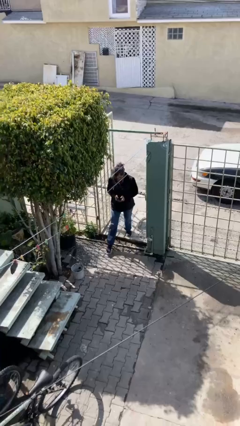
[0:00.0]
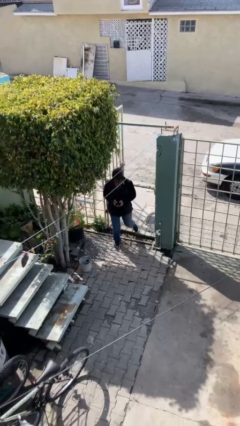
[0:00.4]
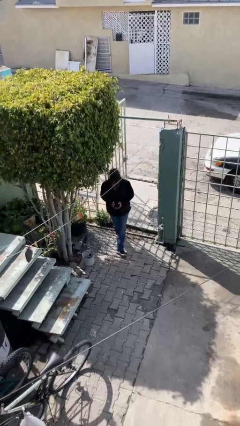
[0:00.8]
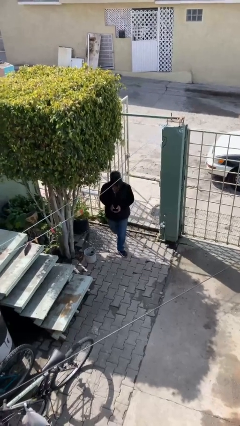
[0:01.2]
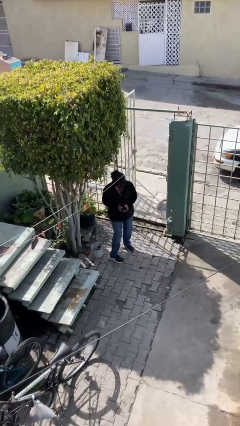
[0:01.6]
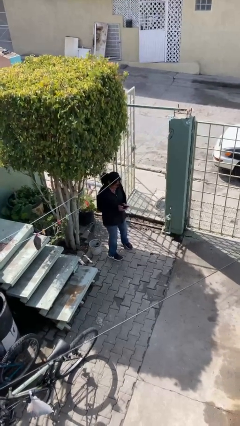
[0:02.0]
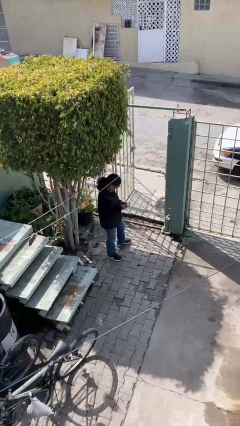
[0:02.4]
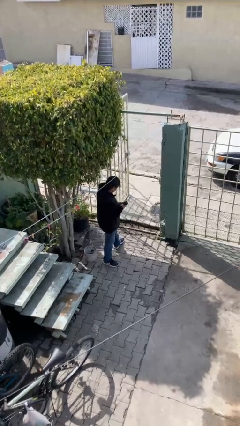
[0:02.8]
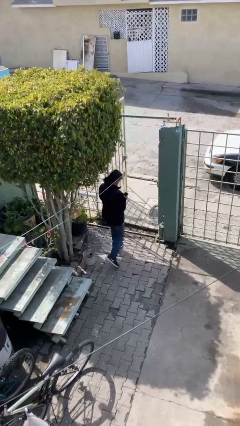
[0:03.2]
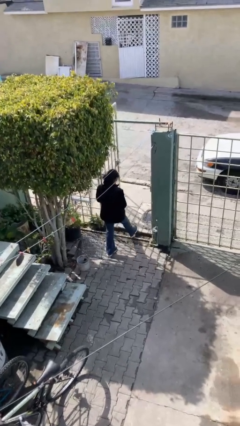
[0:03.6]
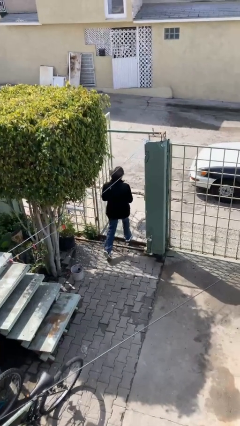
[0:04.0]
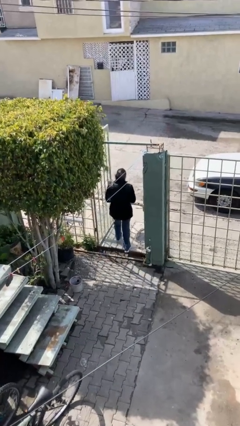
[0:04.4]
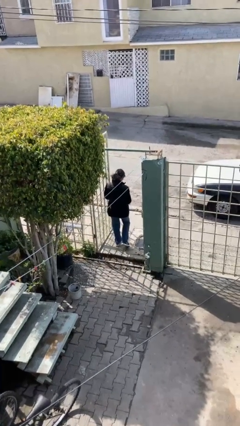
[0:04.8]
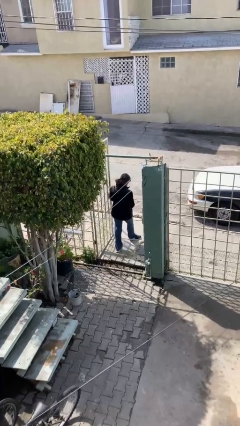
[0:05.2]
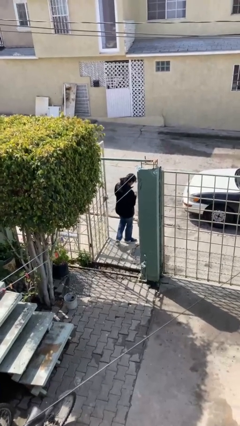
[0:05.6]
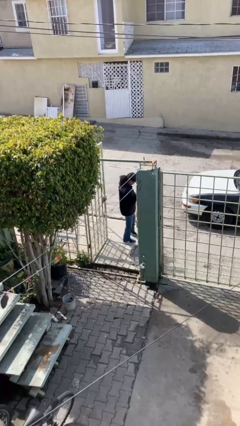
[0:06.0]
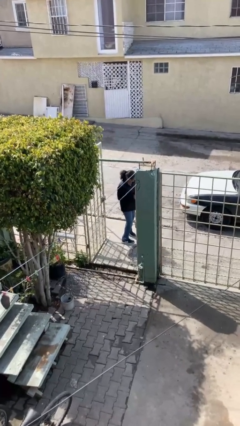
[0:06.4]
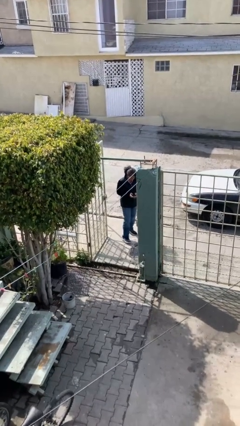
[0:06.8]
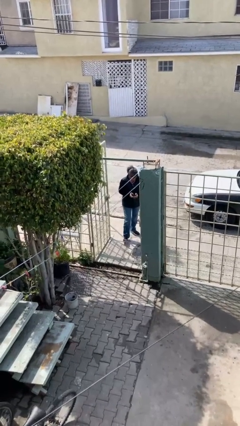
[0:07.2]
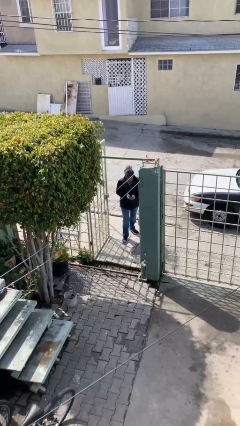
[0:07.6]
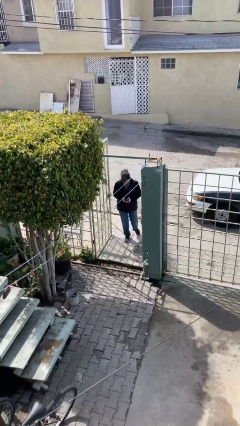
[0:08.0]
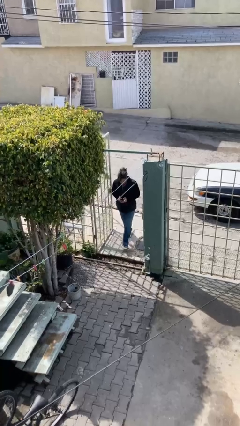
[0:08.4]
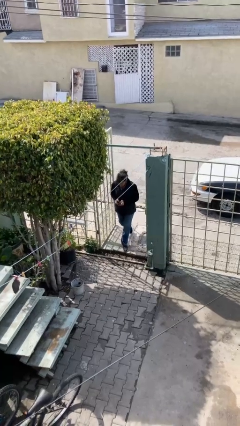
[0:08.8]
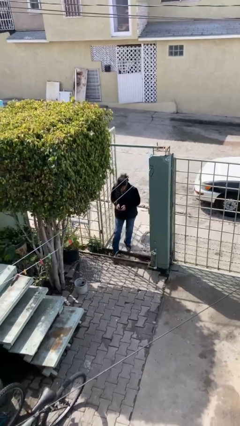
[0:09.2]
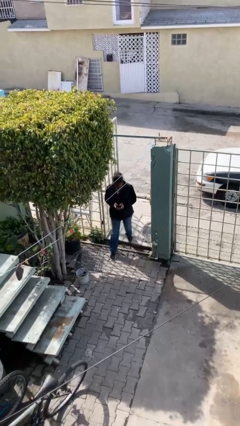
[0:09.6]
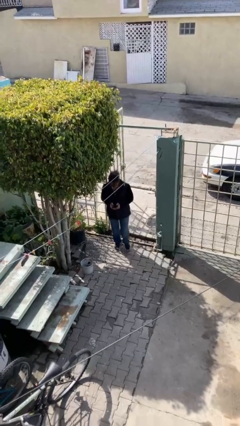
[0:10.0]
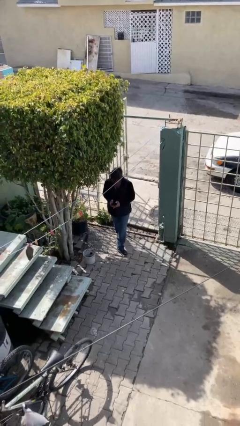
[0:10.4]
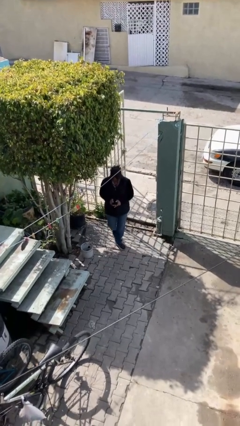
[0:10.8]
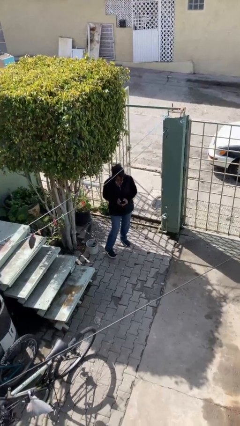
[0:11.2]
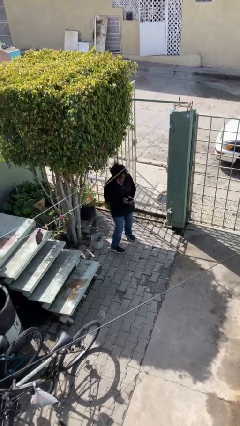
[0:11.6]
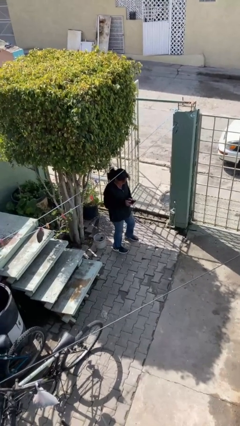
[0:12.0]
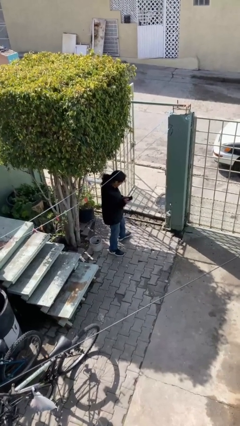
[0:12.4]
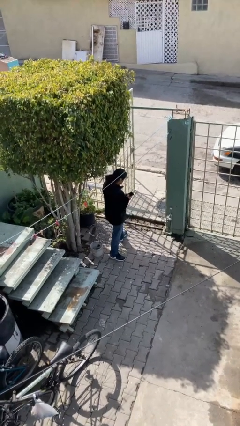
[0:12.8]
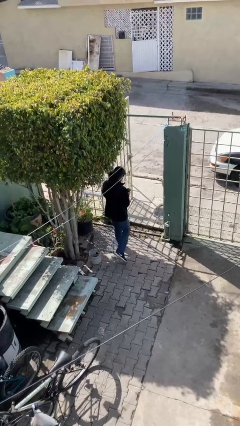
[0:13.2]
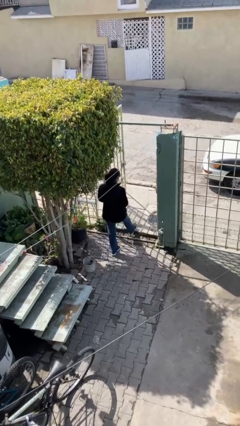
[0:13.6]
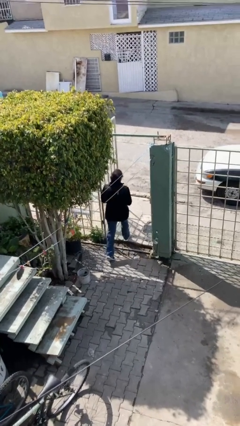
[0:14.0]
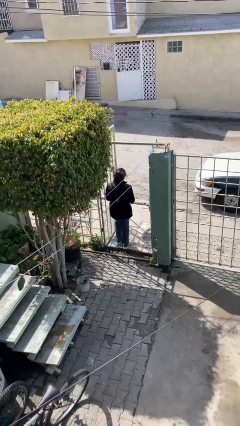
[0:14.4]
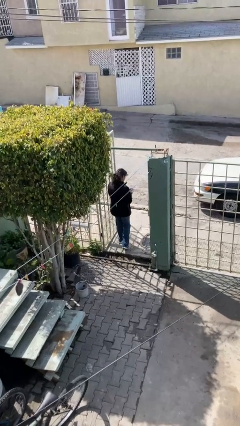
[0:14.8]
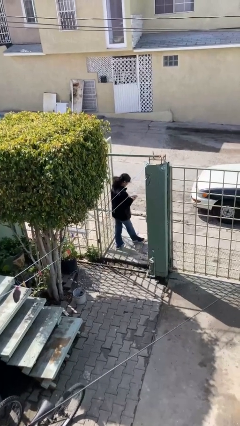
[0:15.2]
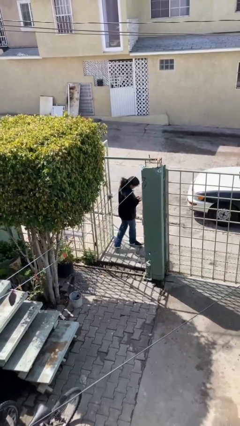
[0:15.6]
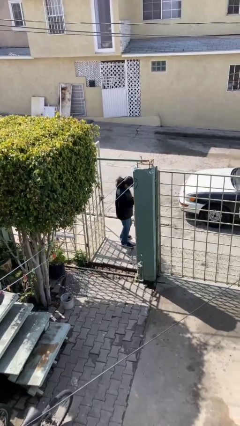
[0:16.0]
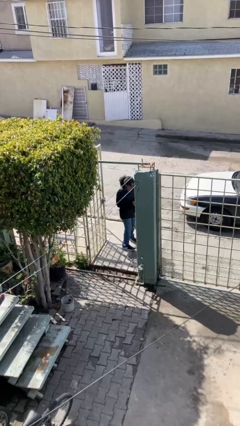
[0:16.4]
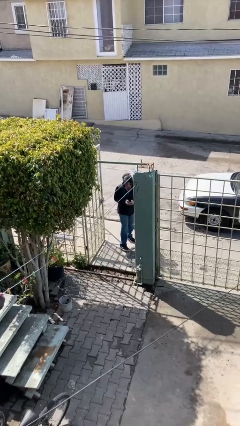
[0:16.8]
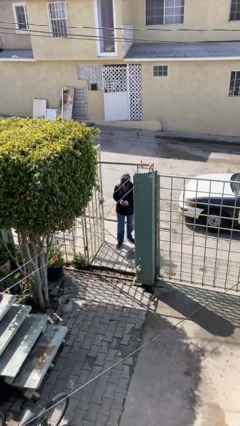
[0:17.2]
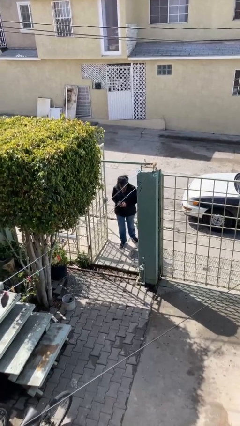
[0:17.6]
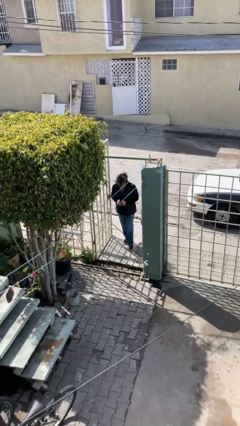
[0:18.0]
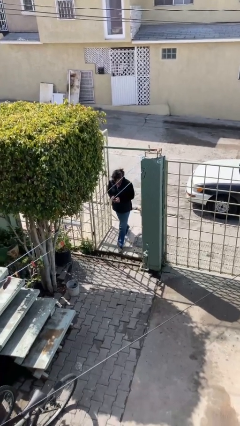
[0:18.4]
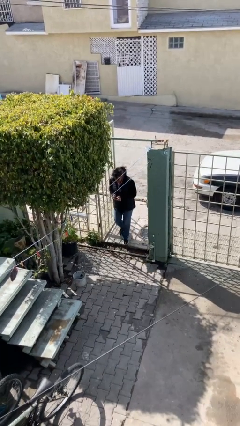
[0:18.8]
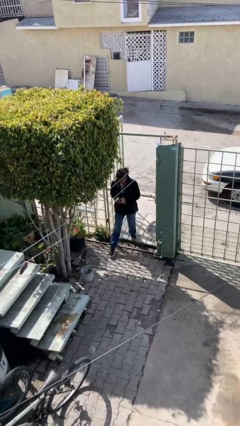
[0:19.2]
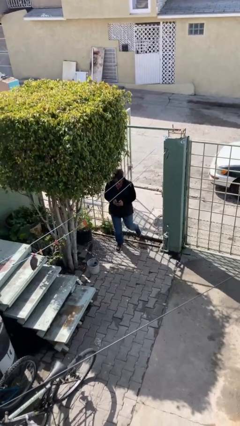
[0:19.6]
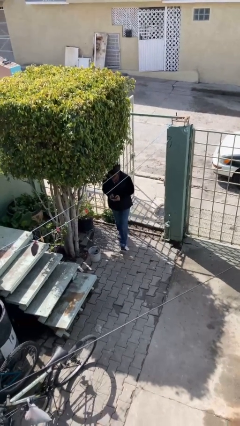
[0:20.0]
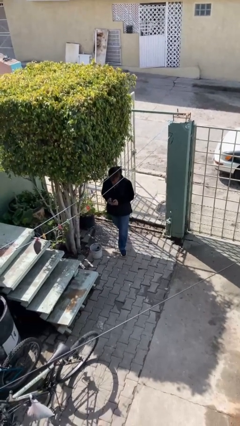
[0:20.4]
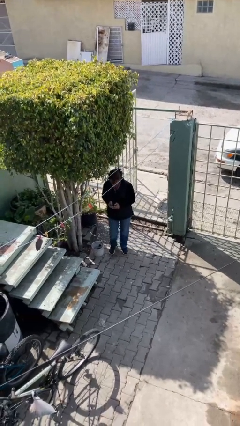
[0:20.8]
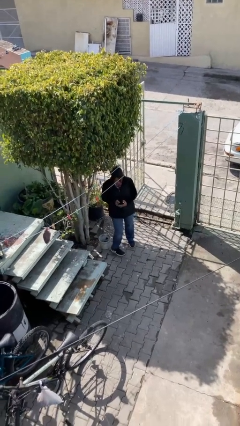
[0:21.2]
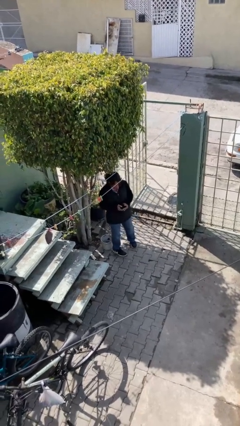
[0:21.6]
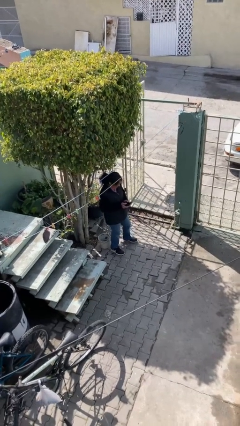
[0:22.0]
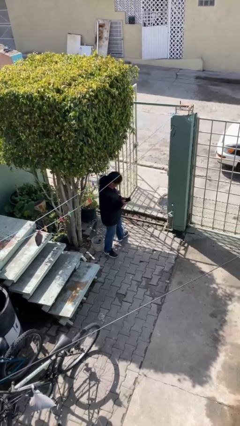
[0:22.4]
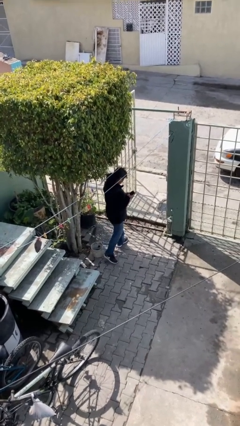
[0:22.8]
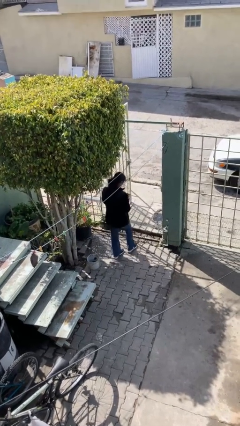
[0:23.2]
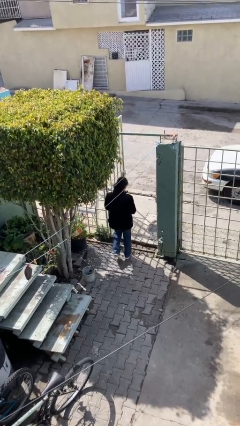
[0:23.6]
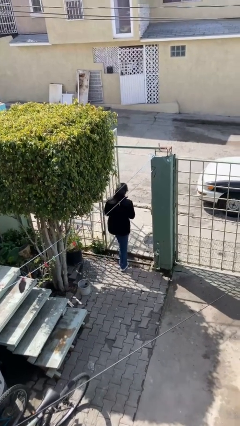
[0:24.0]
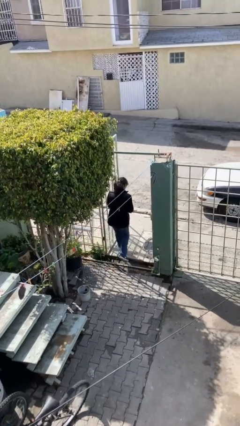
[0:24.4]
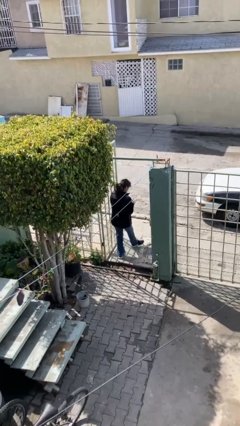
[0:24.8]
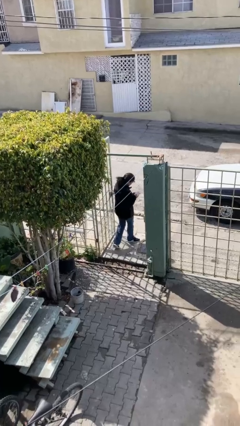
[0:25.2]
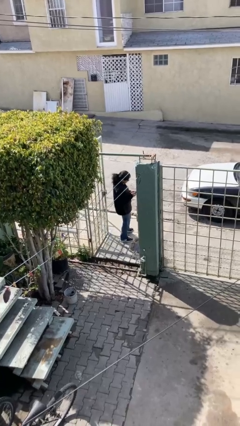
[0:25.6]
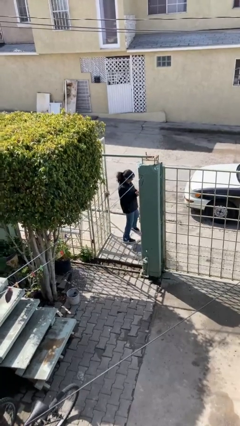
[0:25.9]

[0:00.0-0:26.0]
person texts on phone

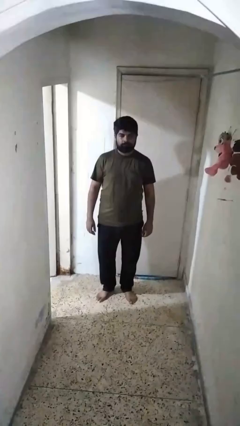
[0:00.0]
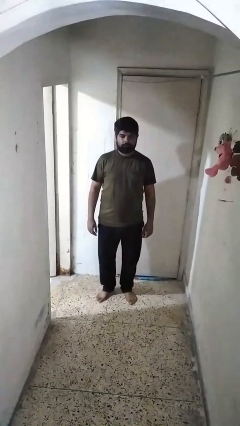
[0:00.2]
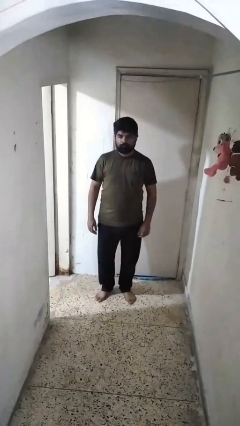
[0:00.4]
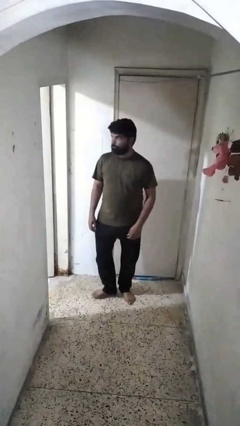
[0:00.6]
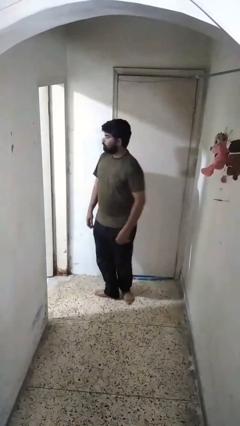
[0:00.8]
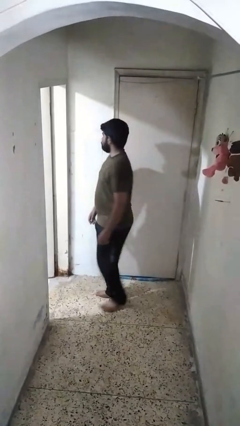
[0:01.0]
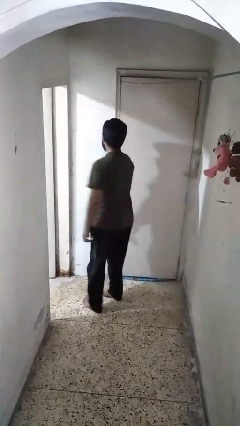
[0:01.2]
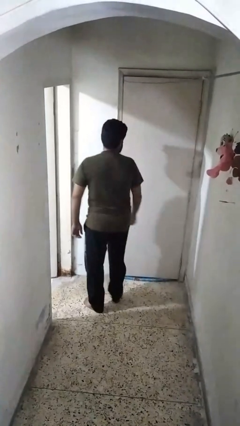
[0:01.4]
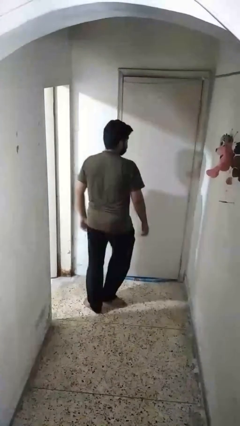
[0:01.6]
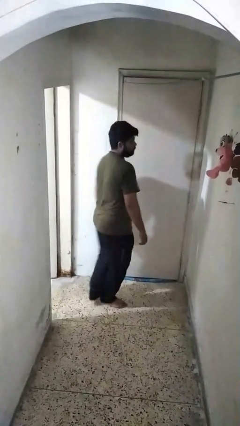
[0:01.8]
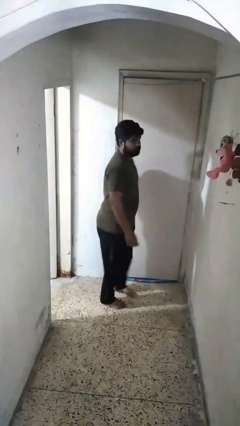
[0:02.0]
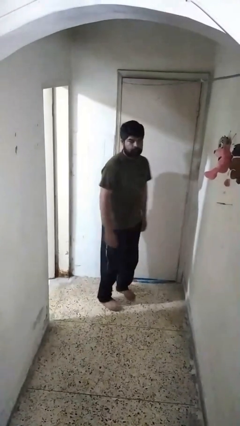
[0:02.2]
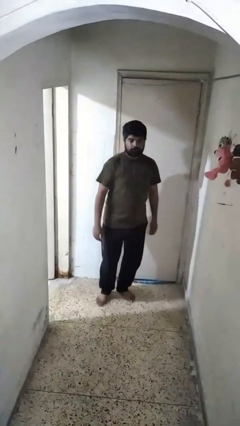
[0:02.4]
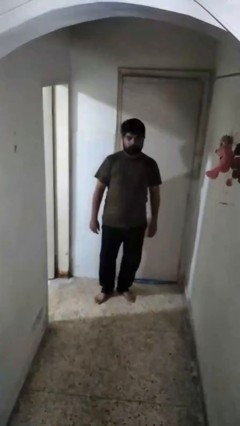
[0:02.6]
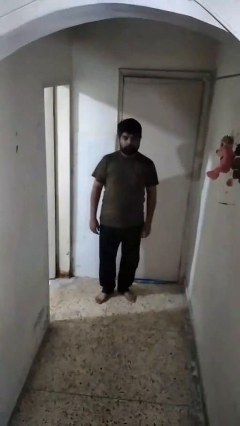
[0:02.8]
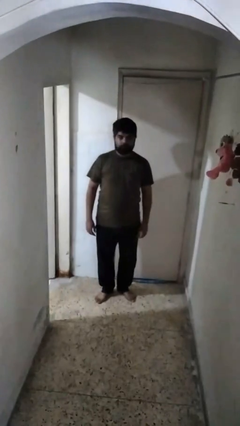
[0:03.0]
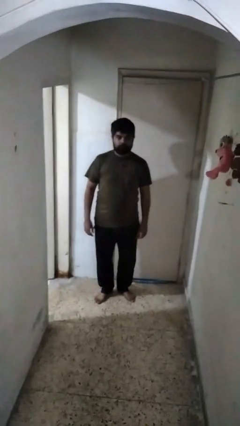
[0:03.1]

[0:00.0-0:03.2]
person twirls

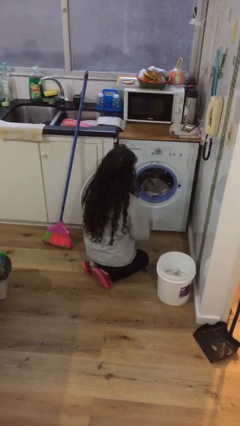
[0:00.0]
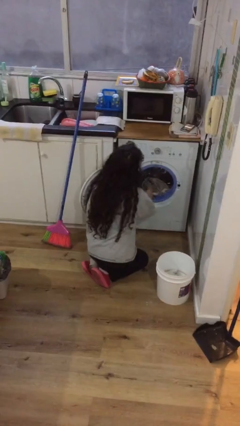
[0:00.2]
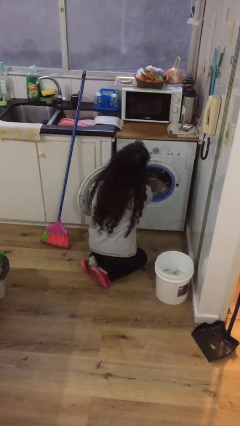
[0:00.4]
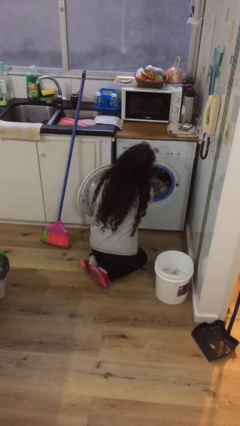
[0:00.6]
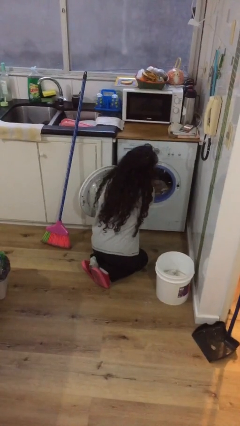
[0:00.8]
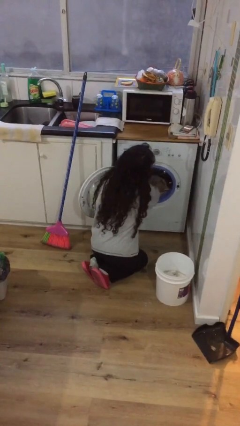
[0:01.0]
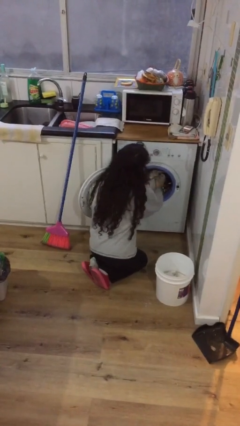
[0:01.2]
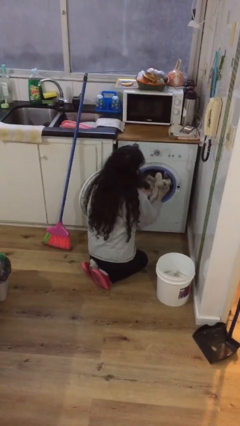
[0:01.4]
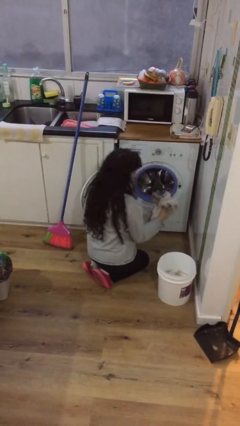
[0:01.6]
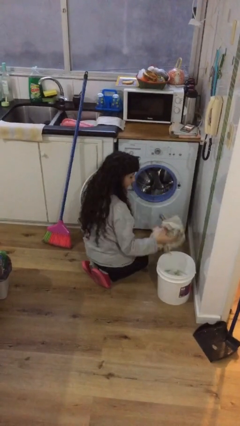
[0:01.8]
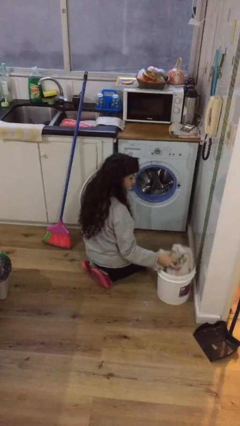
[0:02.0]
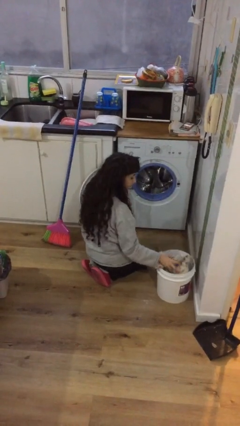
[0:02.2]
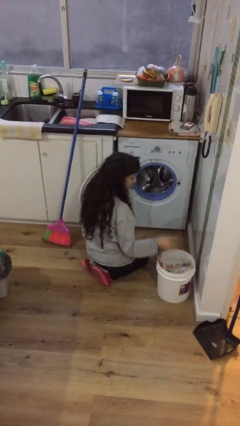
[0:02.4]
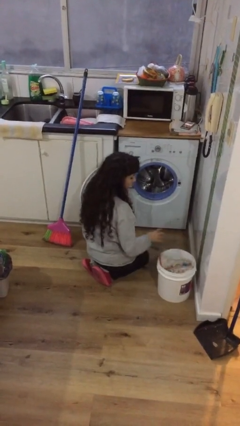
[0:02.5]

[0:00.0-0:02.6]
person unloads dryer
